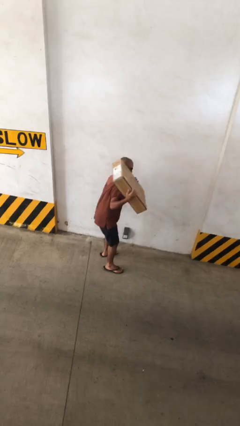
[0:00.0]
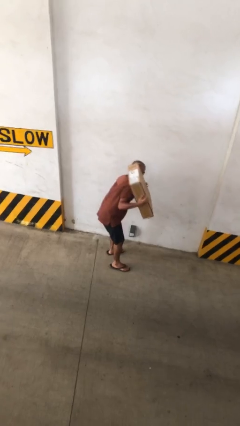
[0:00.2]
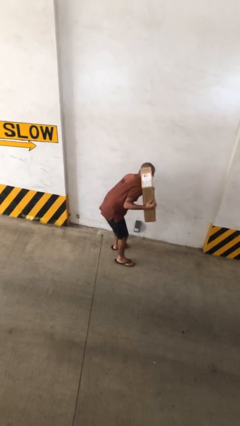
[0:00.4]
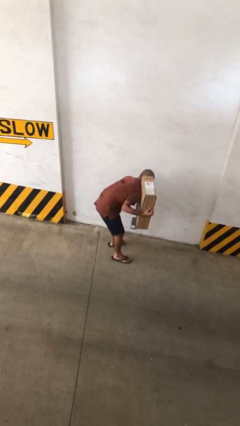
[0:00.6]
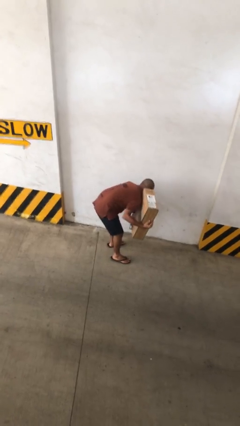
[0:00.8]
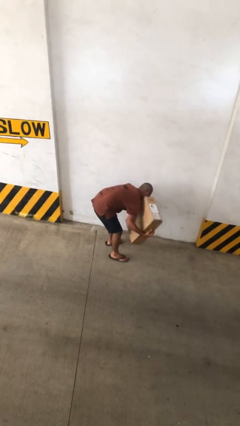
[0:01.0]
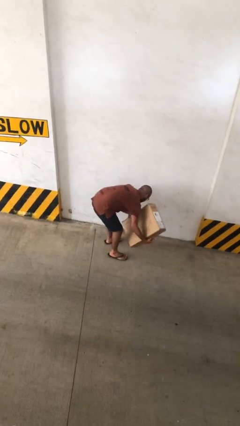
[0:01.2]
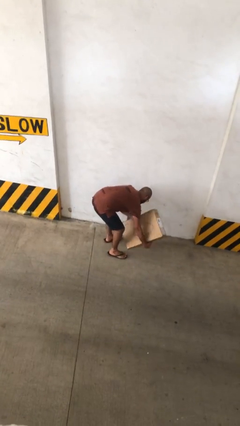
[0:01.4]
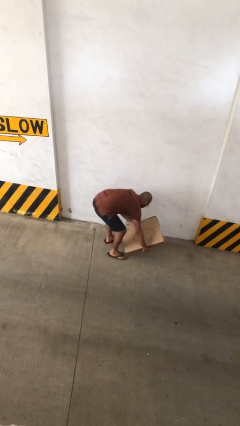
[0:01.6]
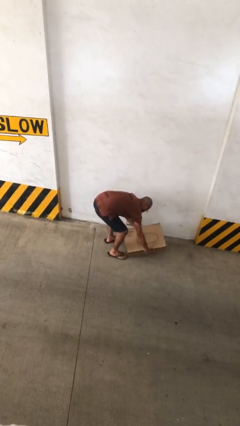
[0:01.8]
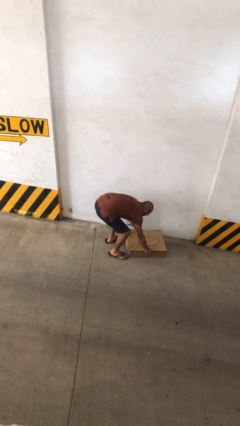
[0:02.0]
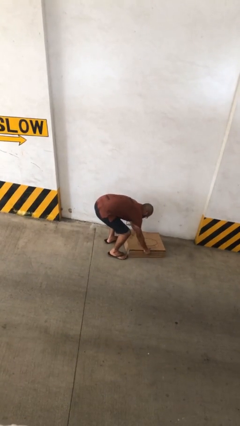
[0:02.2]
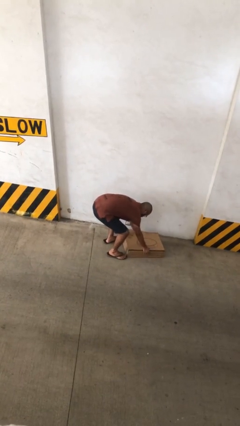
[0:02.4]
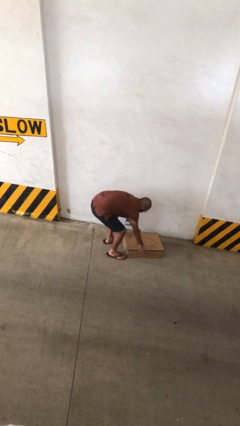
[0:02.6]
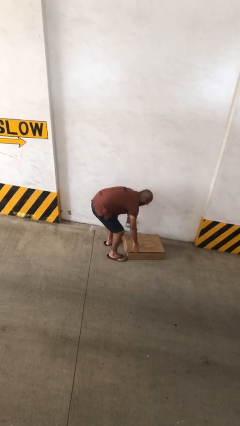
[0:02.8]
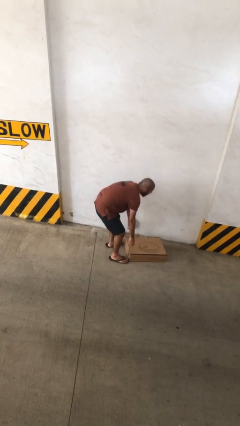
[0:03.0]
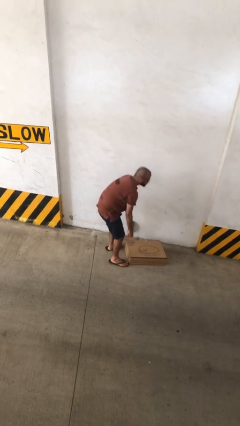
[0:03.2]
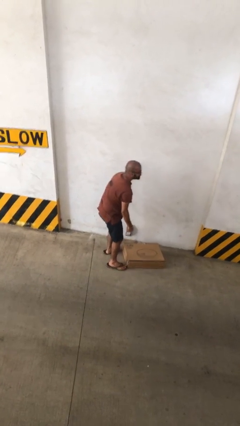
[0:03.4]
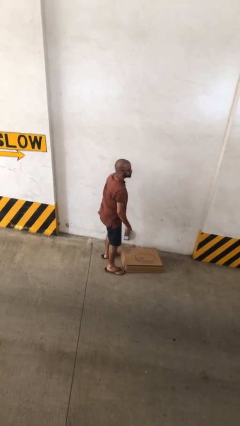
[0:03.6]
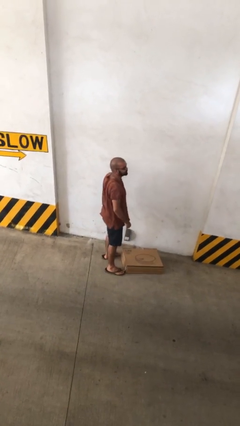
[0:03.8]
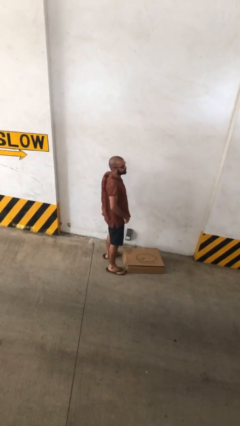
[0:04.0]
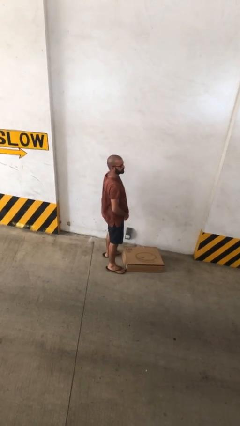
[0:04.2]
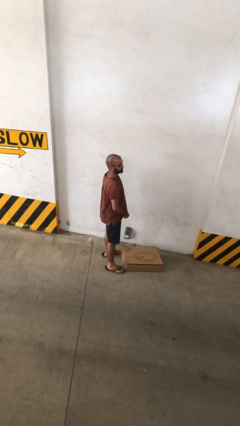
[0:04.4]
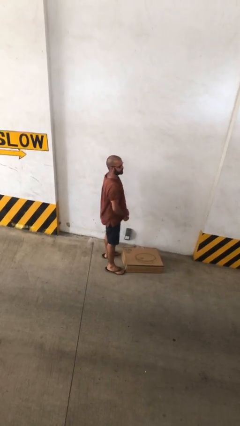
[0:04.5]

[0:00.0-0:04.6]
person puts down object on floor

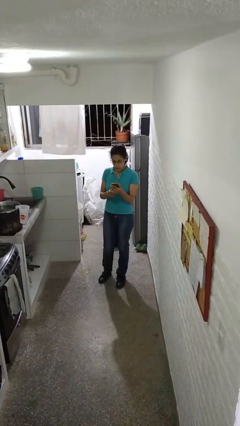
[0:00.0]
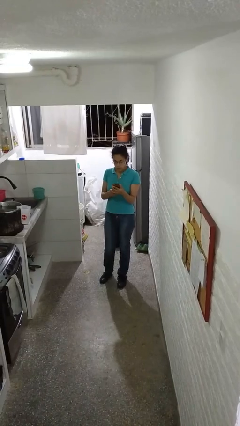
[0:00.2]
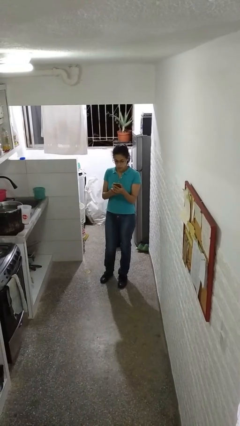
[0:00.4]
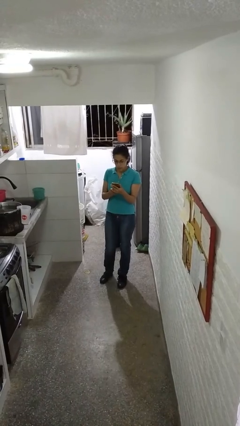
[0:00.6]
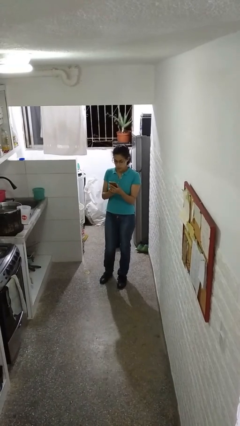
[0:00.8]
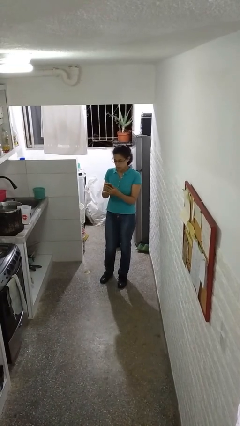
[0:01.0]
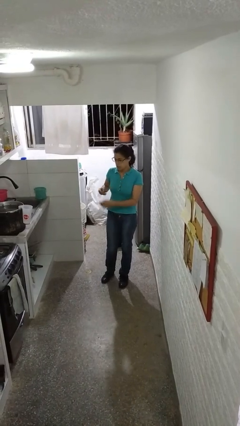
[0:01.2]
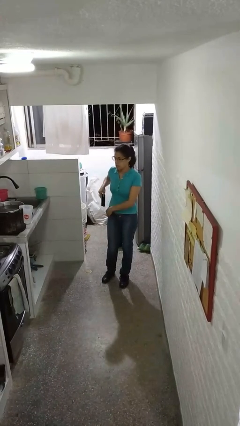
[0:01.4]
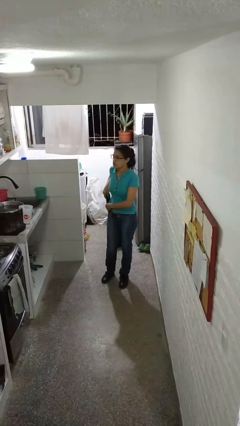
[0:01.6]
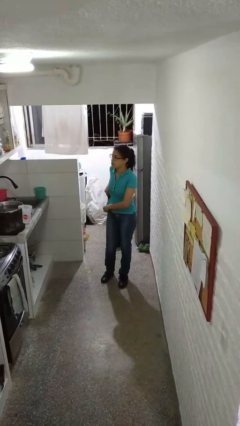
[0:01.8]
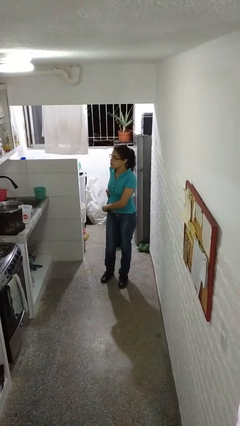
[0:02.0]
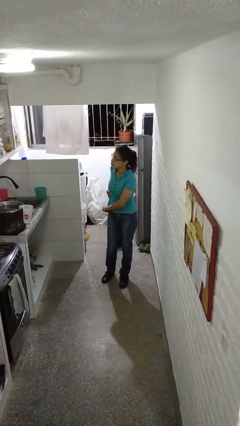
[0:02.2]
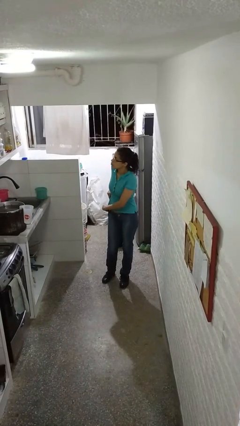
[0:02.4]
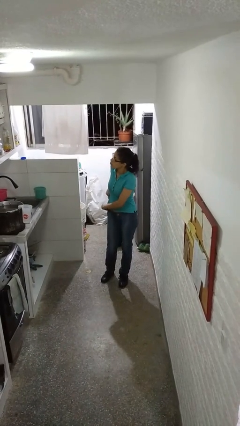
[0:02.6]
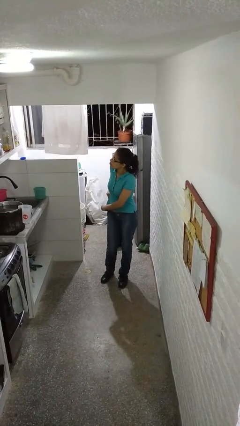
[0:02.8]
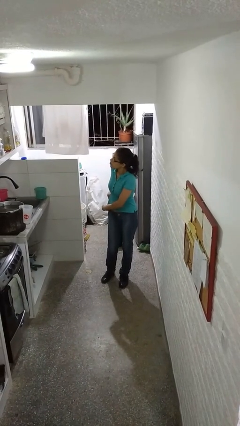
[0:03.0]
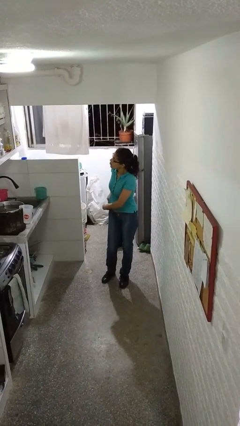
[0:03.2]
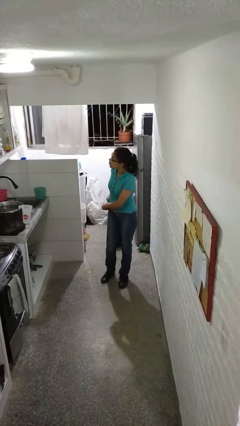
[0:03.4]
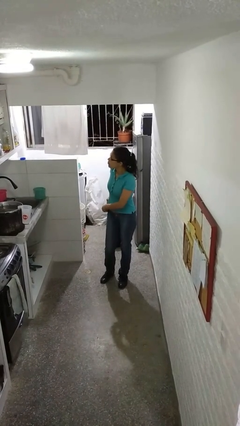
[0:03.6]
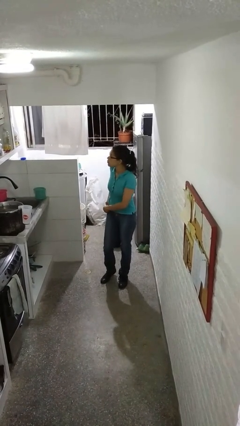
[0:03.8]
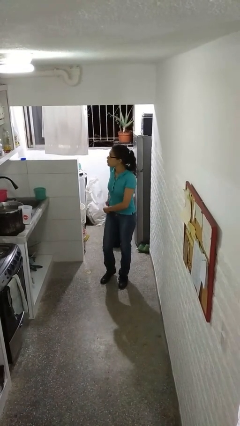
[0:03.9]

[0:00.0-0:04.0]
person puts phone into pocket

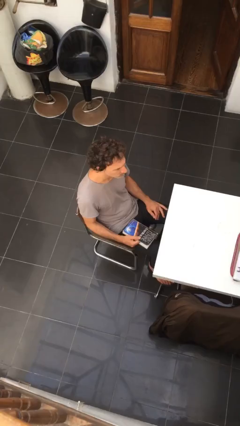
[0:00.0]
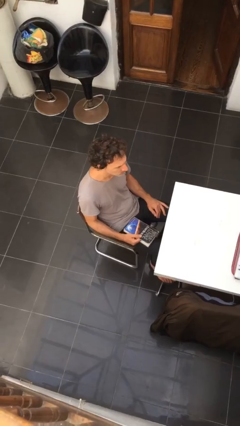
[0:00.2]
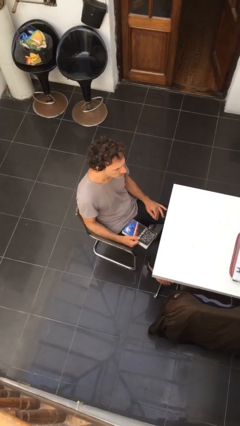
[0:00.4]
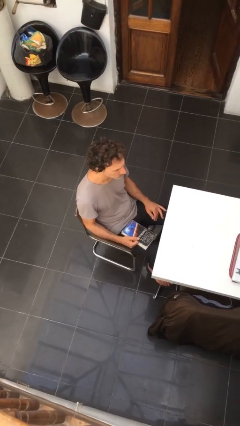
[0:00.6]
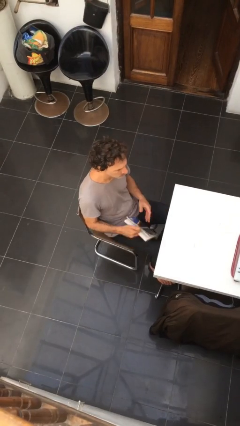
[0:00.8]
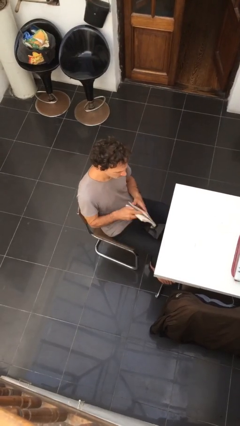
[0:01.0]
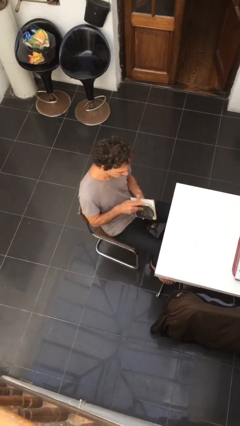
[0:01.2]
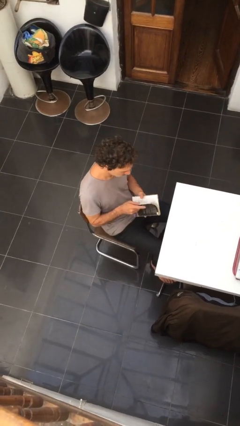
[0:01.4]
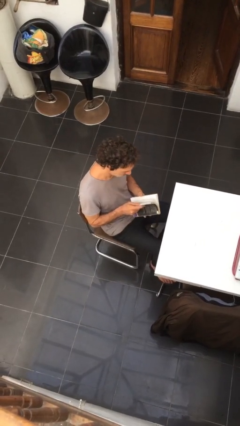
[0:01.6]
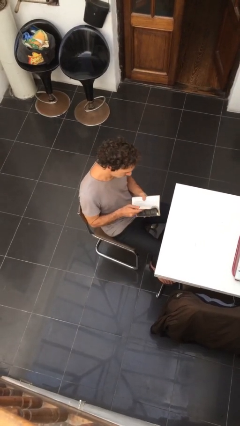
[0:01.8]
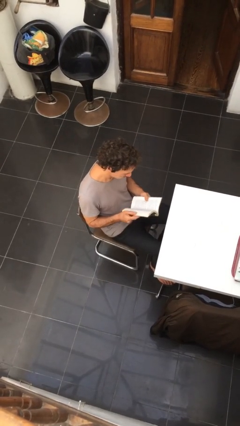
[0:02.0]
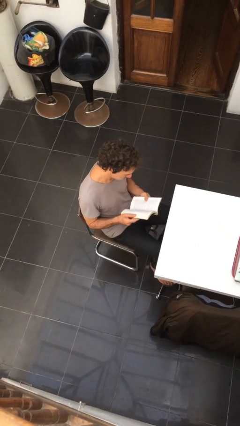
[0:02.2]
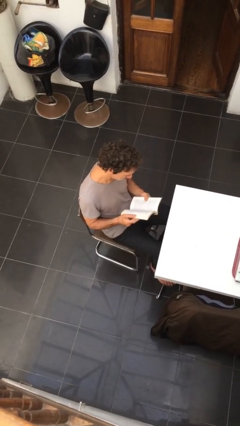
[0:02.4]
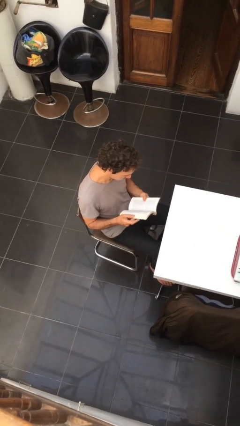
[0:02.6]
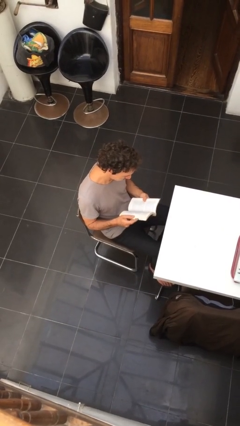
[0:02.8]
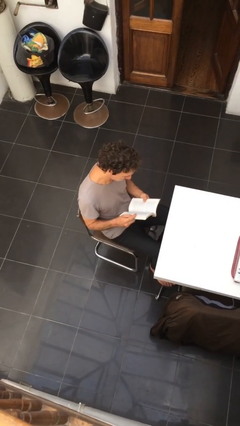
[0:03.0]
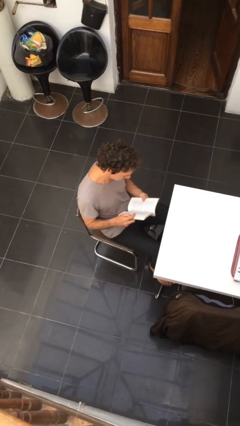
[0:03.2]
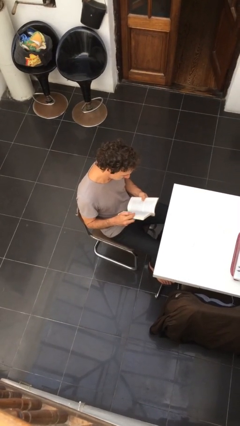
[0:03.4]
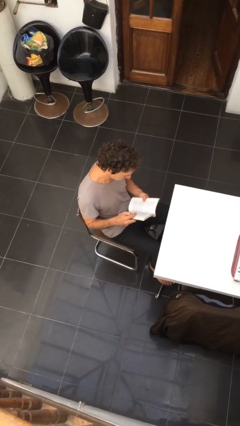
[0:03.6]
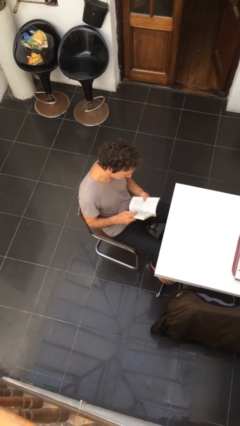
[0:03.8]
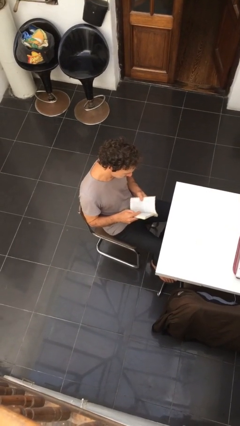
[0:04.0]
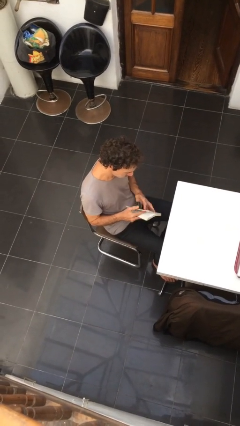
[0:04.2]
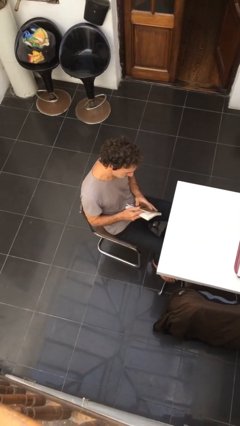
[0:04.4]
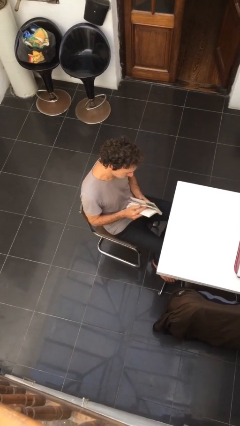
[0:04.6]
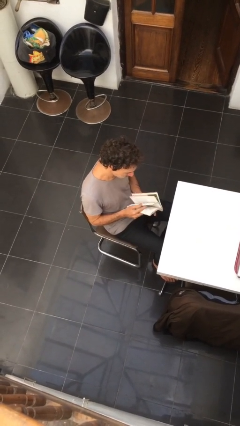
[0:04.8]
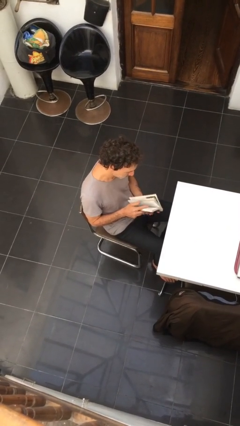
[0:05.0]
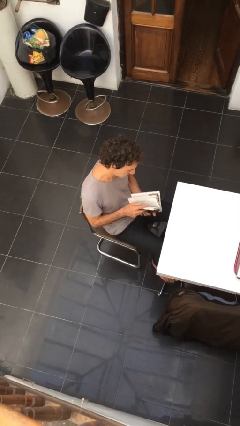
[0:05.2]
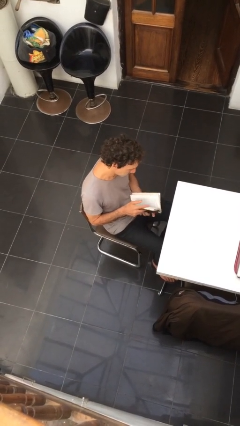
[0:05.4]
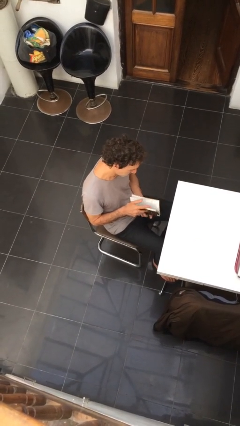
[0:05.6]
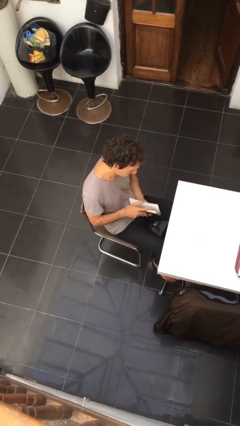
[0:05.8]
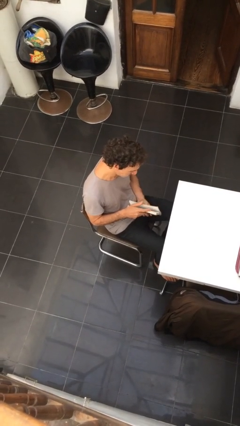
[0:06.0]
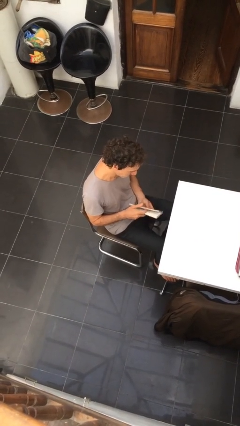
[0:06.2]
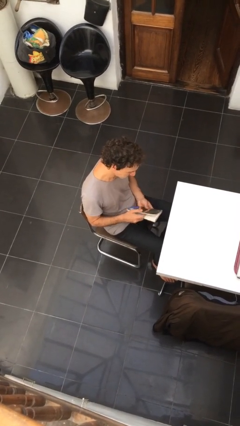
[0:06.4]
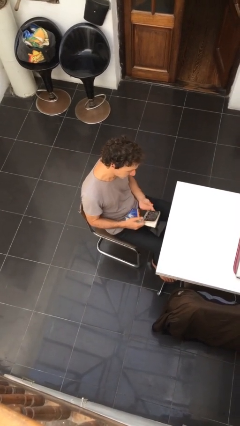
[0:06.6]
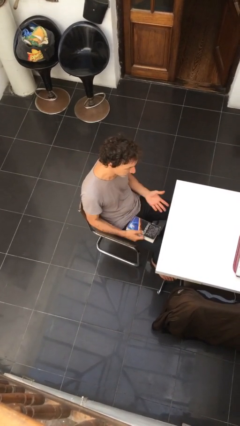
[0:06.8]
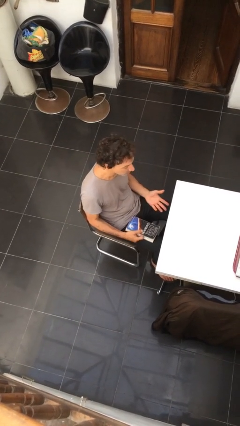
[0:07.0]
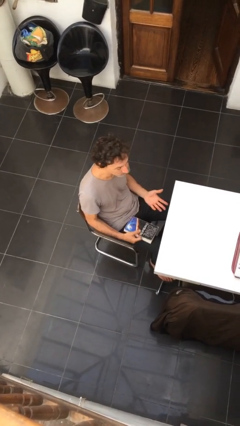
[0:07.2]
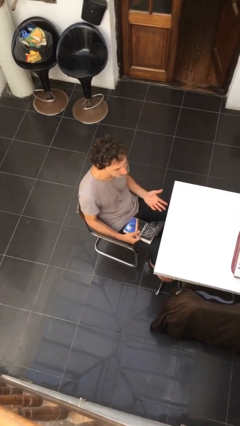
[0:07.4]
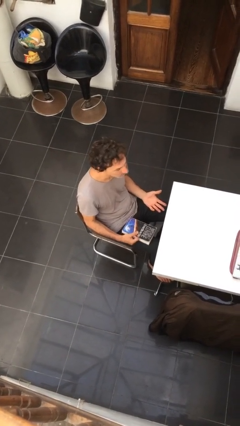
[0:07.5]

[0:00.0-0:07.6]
person reads document

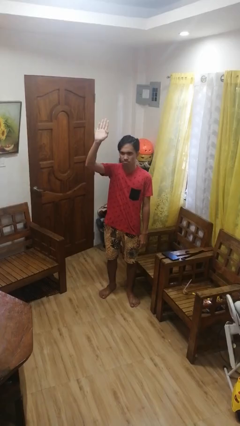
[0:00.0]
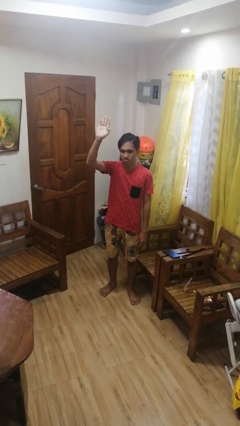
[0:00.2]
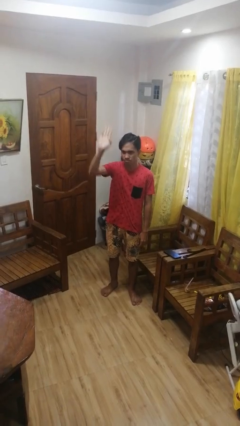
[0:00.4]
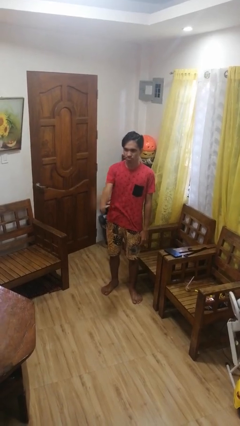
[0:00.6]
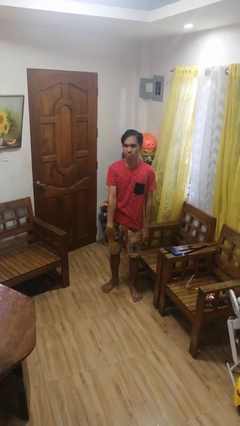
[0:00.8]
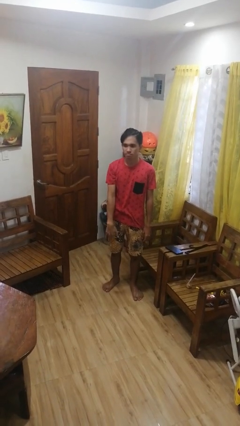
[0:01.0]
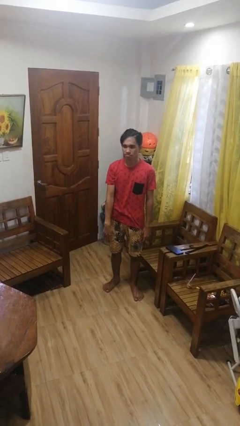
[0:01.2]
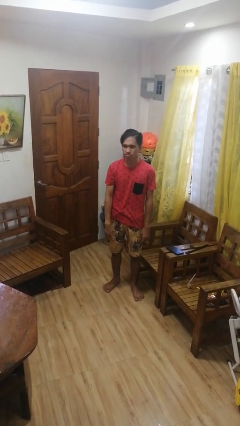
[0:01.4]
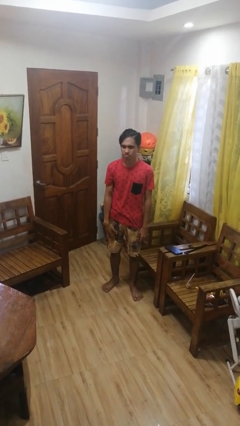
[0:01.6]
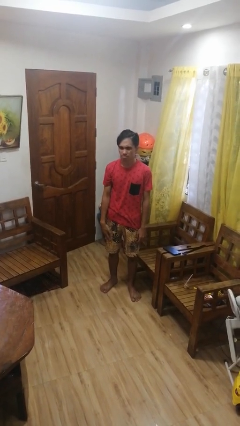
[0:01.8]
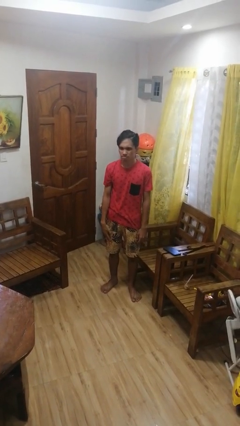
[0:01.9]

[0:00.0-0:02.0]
person gestures swipe down
